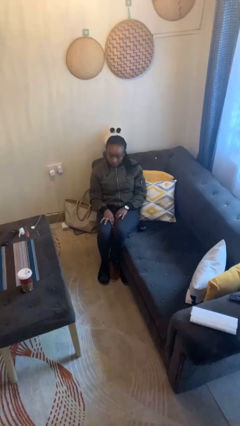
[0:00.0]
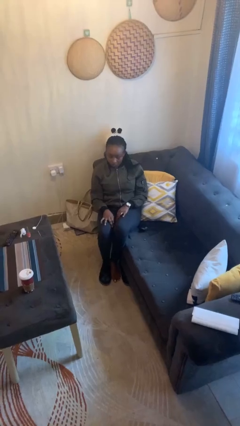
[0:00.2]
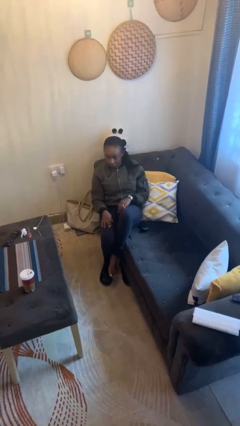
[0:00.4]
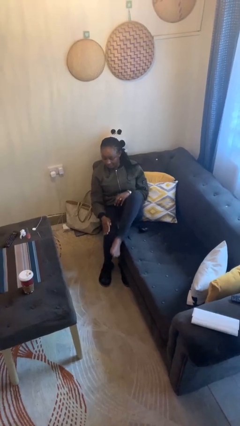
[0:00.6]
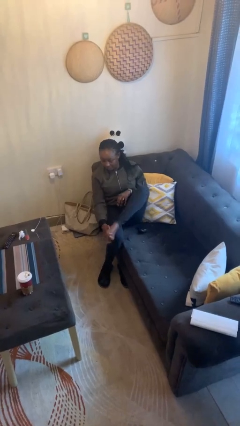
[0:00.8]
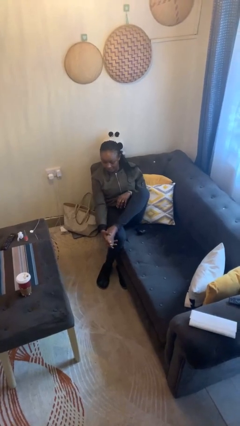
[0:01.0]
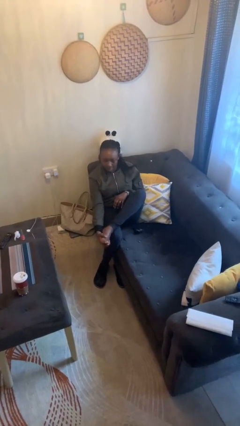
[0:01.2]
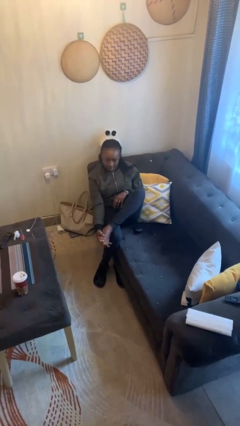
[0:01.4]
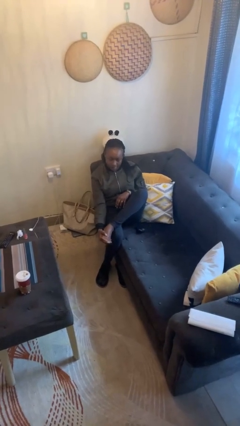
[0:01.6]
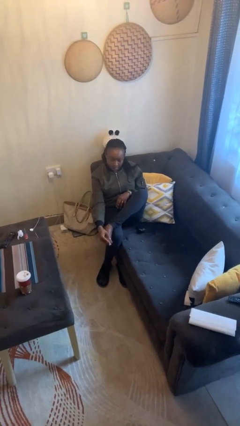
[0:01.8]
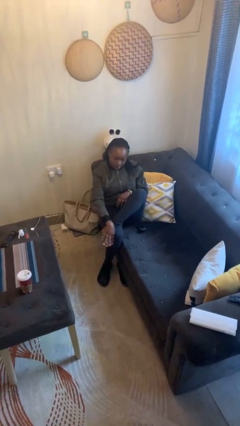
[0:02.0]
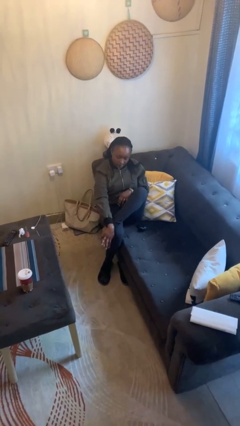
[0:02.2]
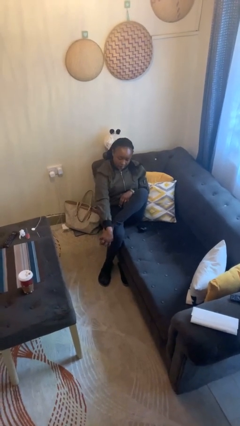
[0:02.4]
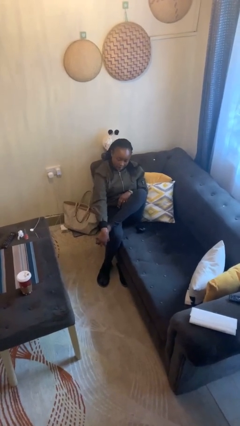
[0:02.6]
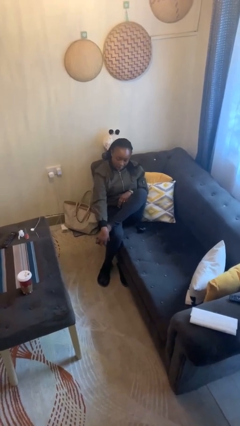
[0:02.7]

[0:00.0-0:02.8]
person rubs foot

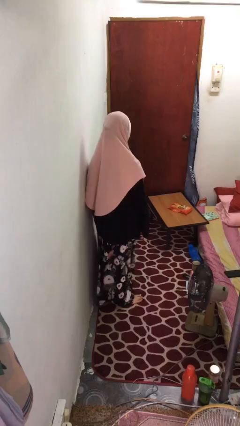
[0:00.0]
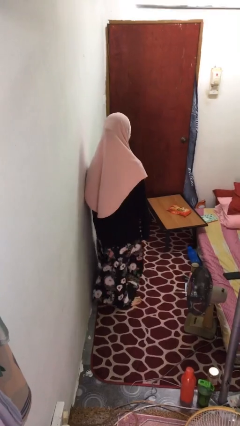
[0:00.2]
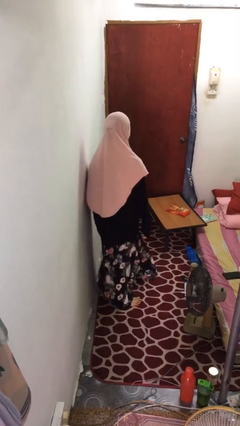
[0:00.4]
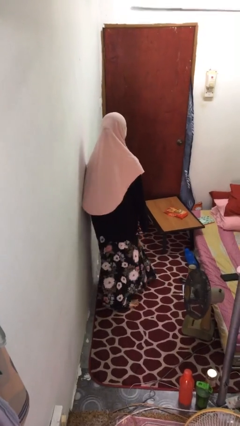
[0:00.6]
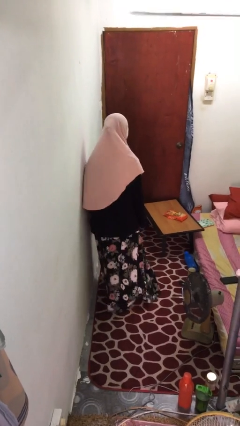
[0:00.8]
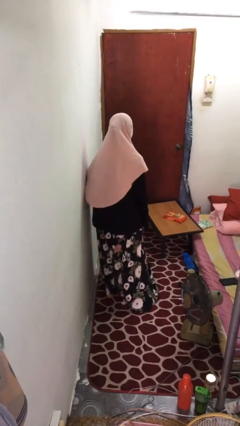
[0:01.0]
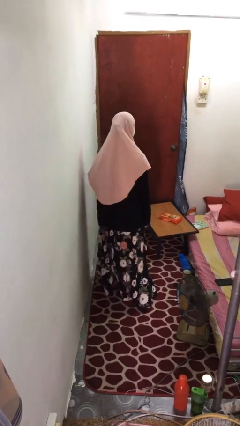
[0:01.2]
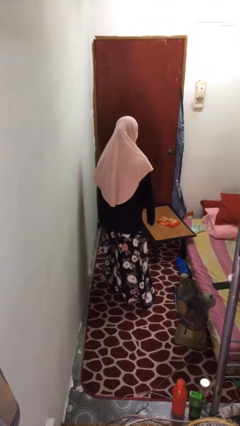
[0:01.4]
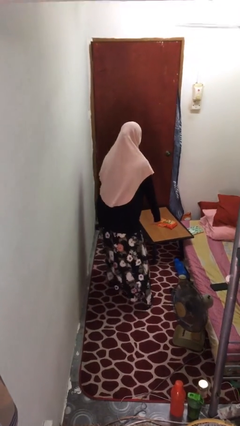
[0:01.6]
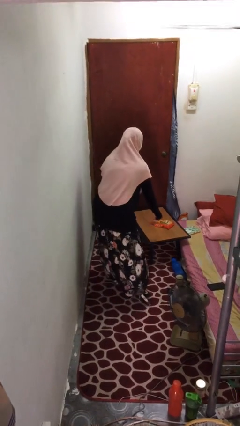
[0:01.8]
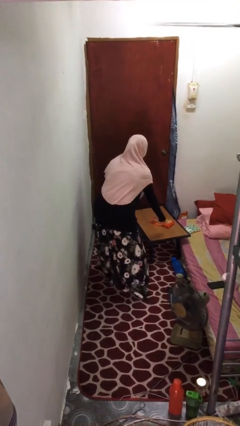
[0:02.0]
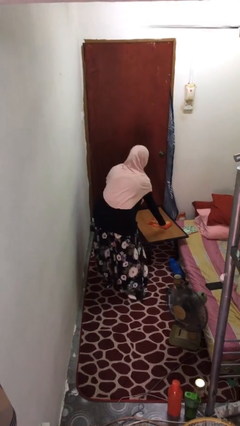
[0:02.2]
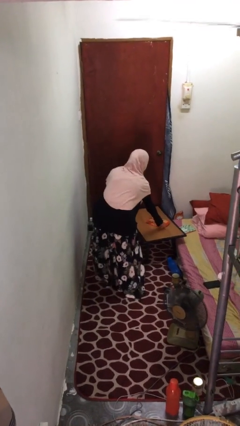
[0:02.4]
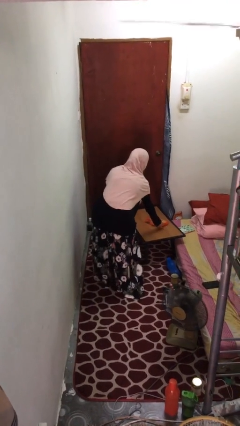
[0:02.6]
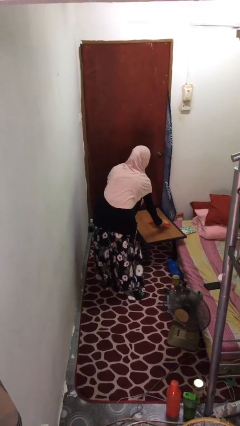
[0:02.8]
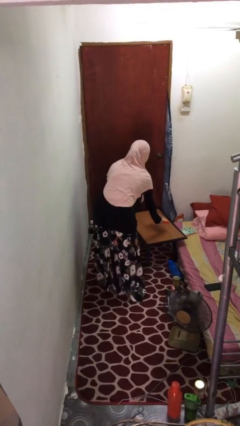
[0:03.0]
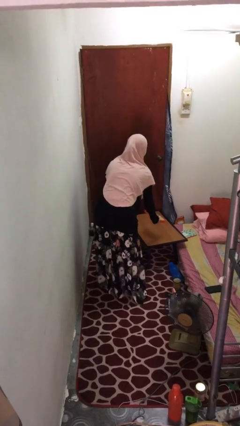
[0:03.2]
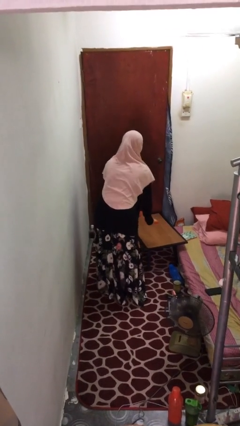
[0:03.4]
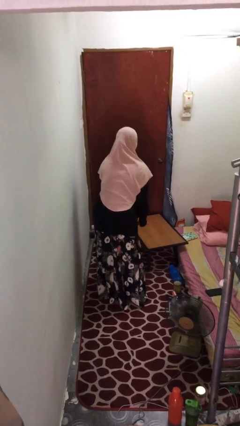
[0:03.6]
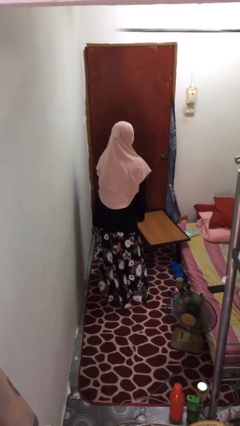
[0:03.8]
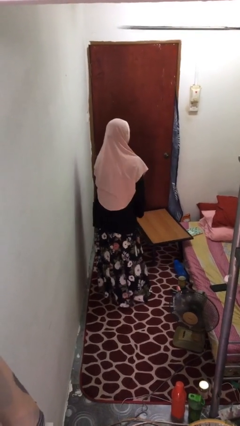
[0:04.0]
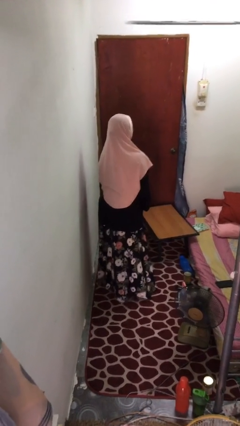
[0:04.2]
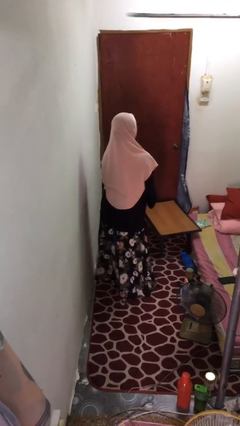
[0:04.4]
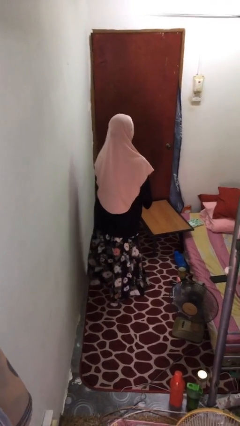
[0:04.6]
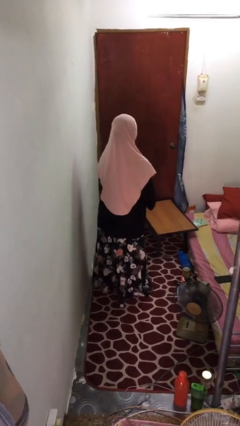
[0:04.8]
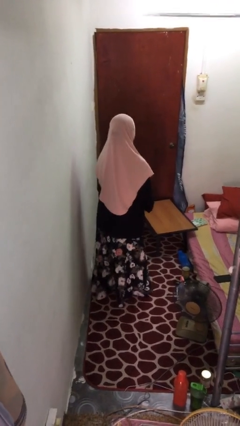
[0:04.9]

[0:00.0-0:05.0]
person picks up object from table

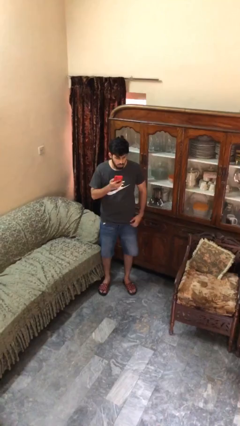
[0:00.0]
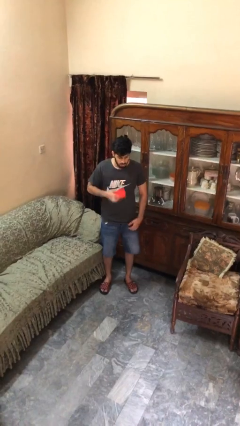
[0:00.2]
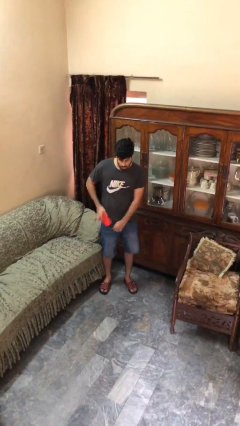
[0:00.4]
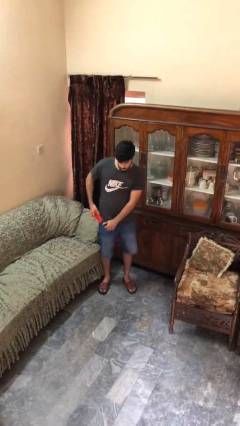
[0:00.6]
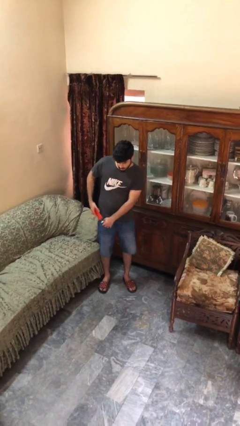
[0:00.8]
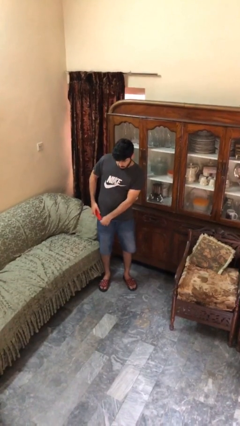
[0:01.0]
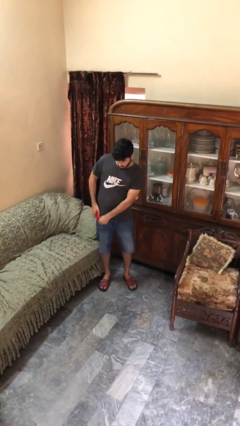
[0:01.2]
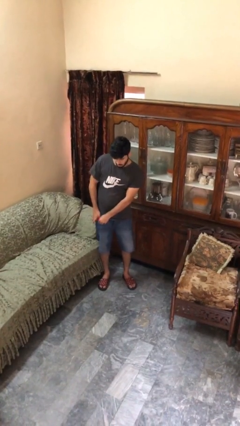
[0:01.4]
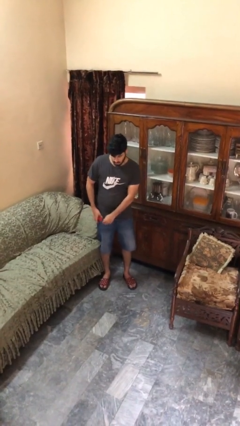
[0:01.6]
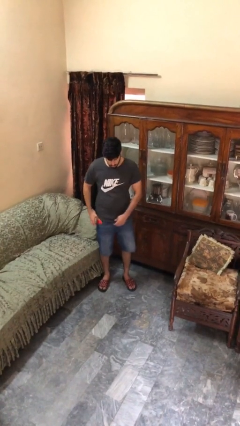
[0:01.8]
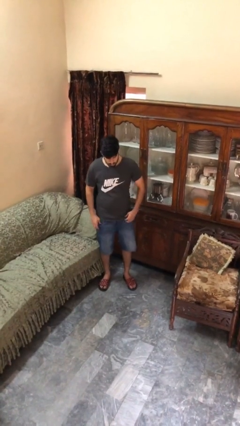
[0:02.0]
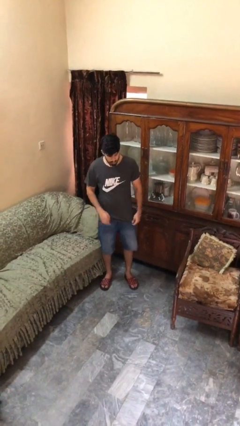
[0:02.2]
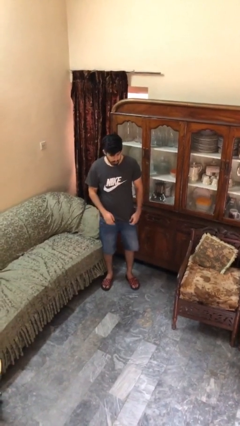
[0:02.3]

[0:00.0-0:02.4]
person puts phone into pocket

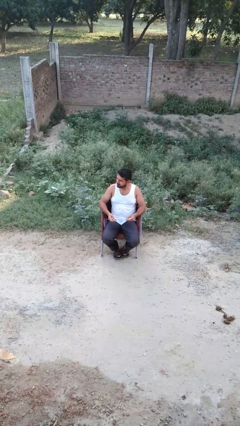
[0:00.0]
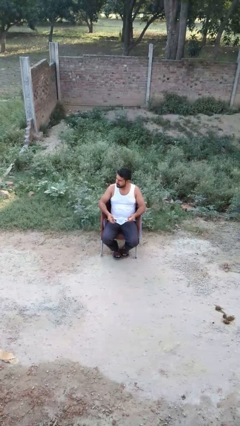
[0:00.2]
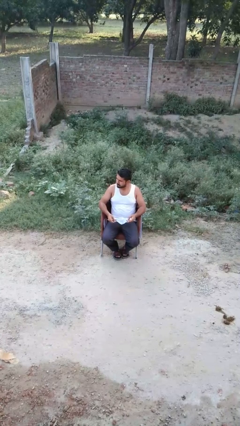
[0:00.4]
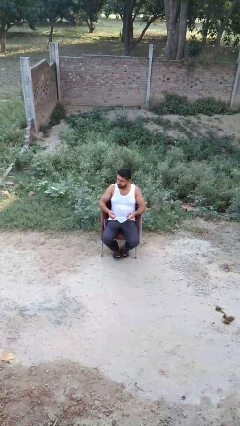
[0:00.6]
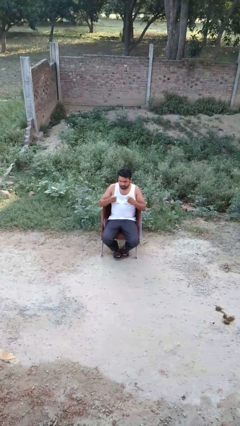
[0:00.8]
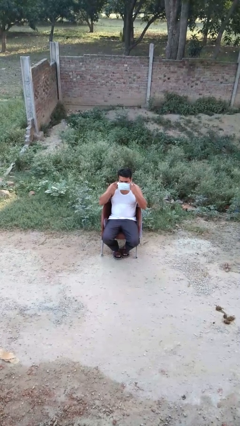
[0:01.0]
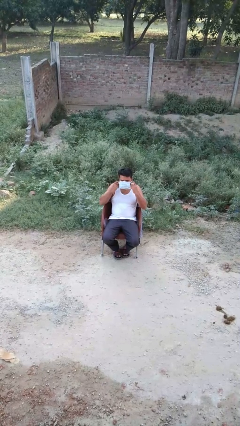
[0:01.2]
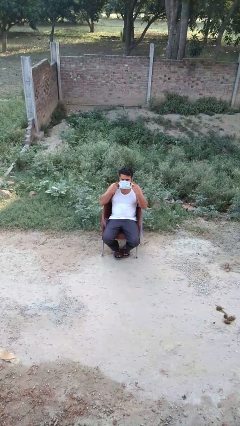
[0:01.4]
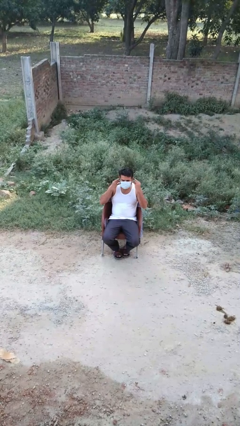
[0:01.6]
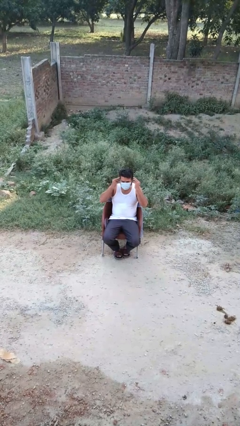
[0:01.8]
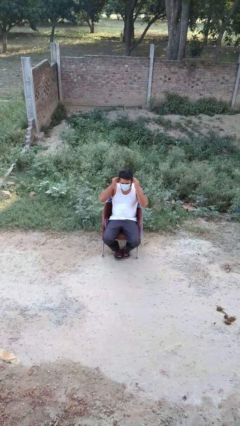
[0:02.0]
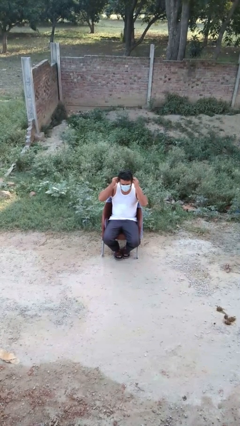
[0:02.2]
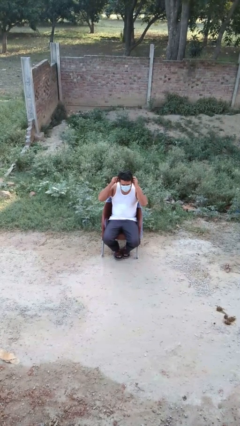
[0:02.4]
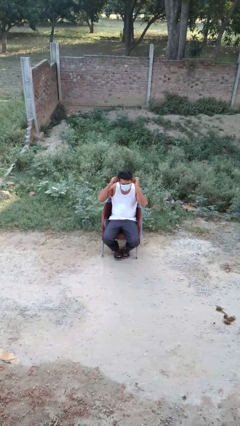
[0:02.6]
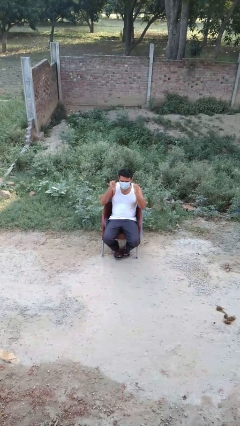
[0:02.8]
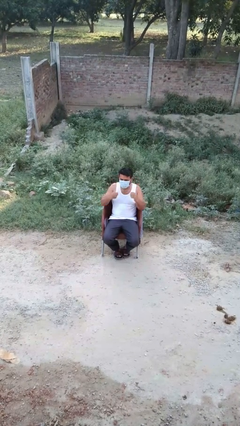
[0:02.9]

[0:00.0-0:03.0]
person puts on facemask

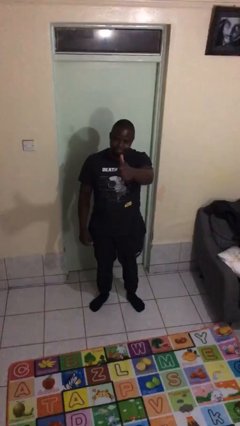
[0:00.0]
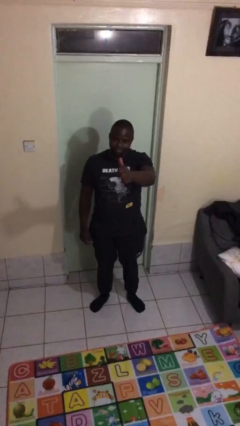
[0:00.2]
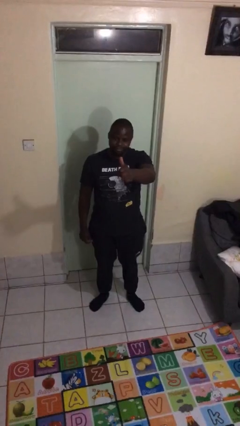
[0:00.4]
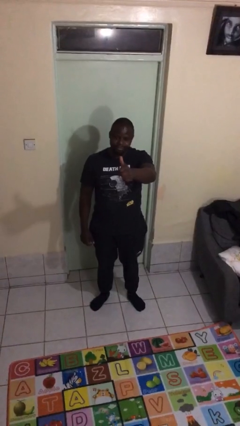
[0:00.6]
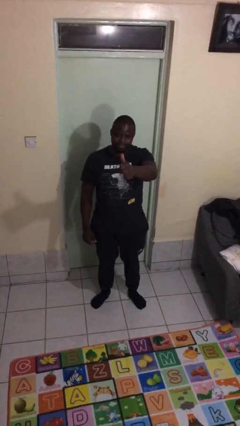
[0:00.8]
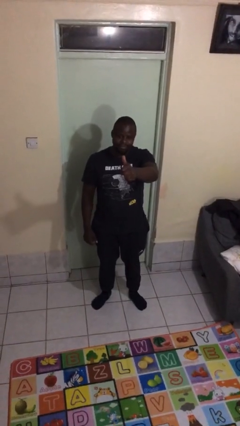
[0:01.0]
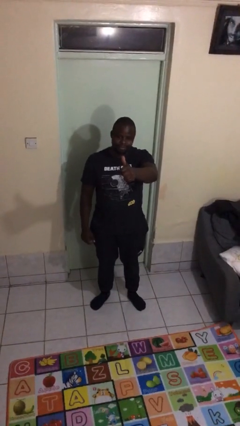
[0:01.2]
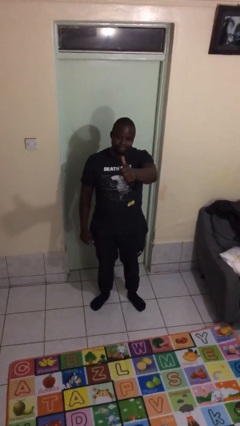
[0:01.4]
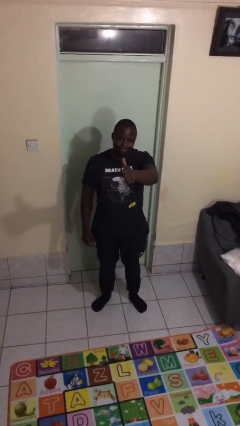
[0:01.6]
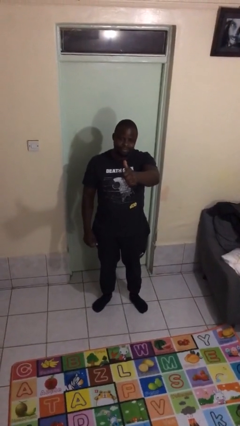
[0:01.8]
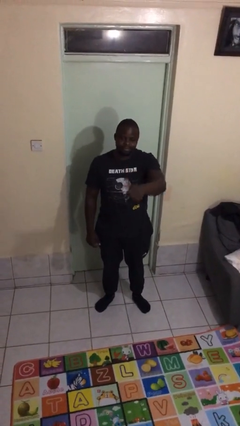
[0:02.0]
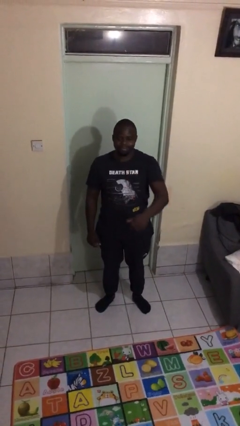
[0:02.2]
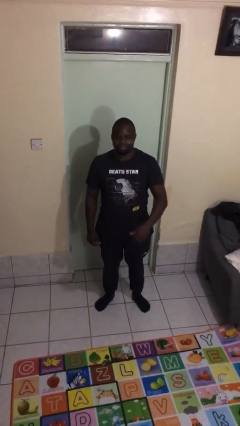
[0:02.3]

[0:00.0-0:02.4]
person gestures thumbs up

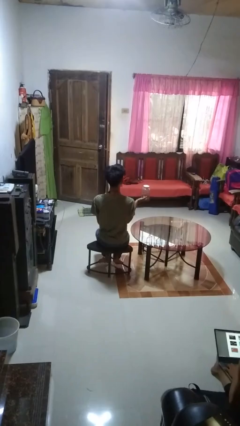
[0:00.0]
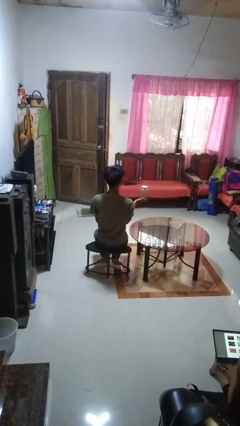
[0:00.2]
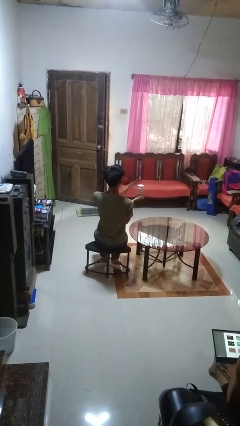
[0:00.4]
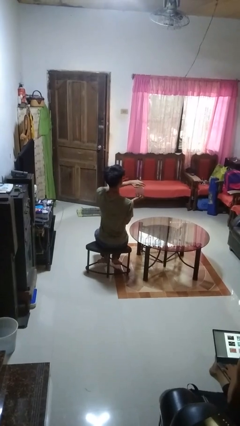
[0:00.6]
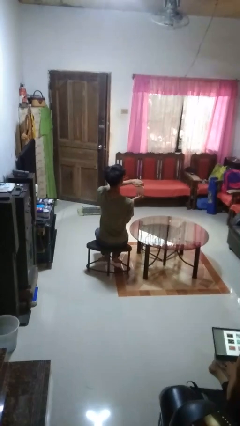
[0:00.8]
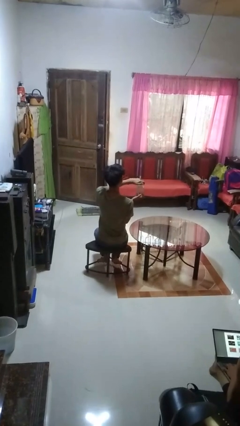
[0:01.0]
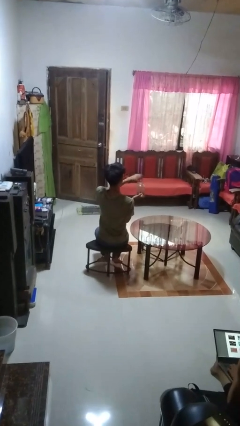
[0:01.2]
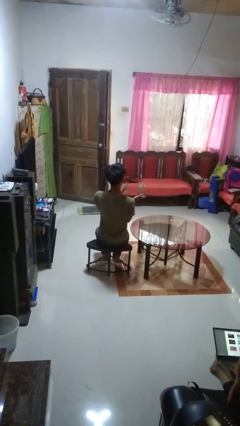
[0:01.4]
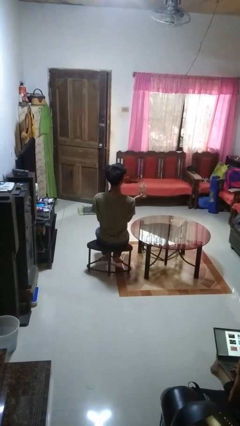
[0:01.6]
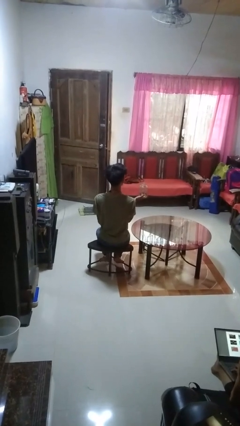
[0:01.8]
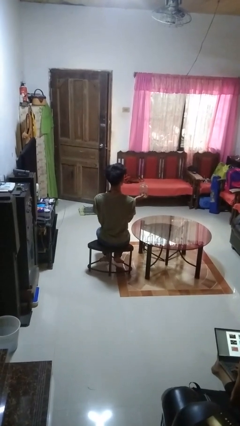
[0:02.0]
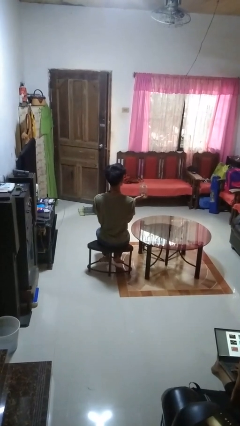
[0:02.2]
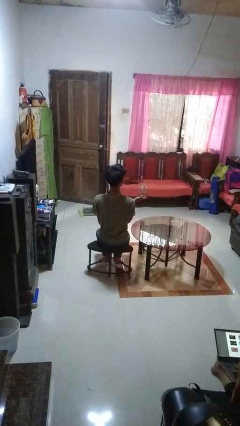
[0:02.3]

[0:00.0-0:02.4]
person opens jar
